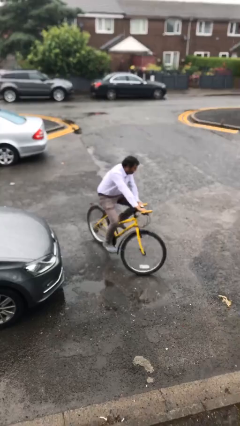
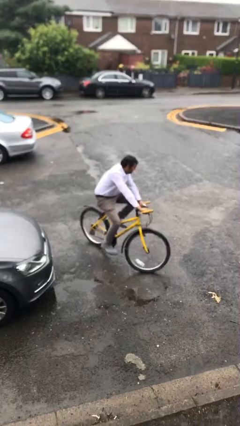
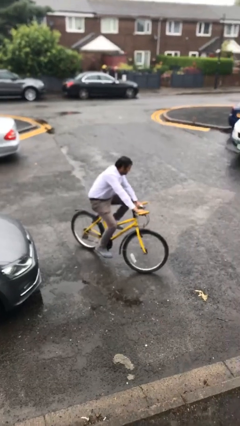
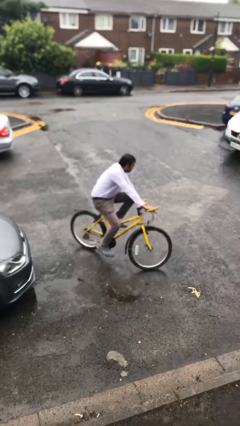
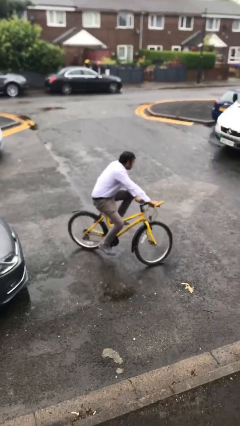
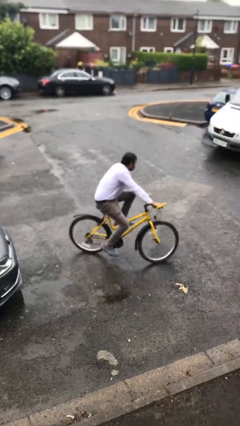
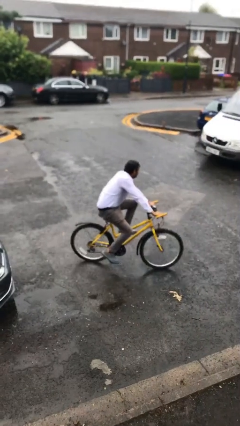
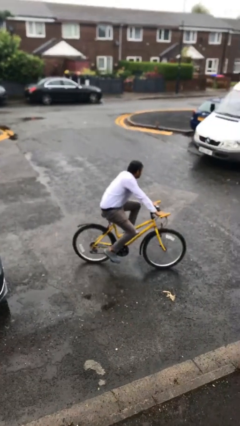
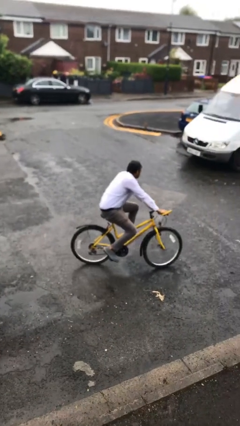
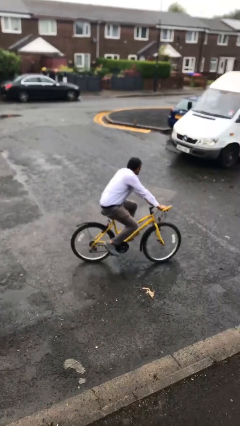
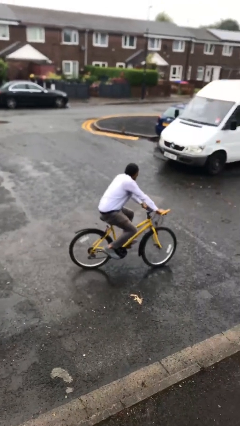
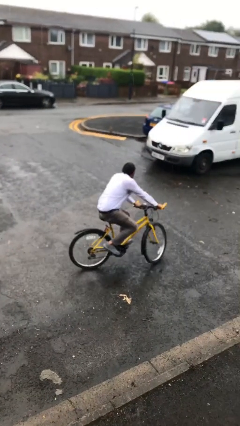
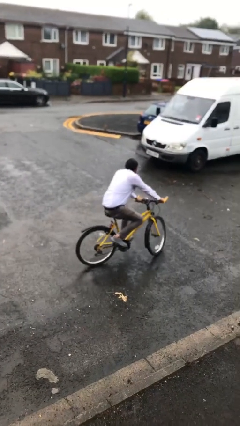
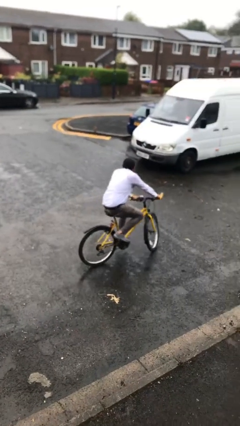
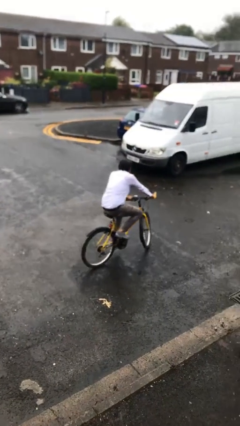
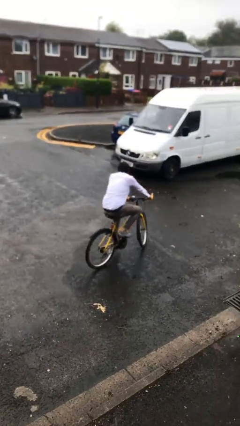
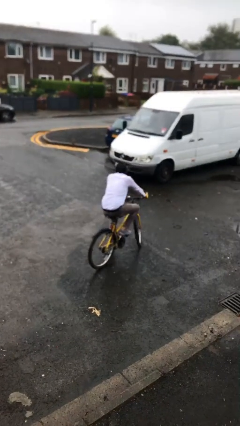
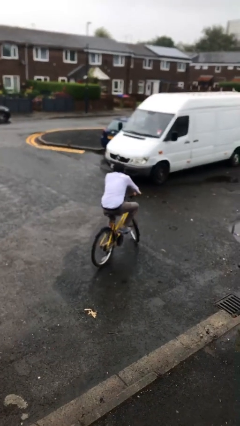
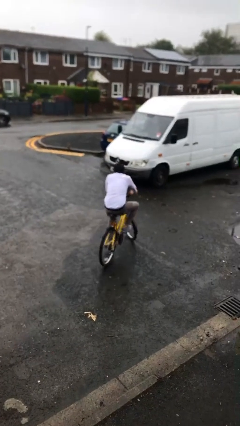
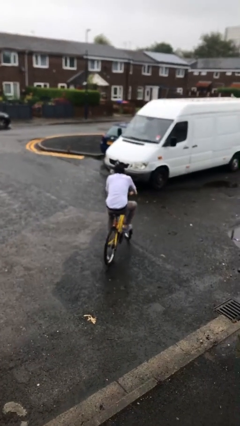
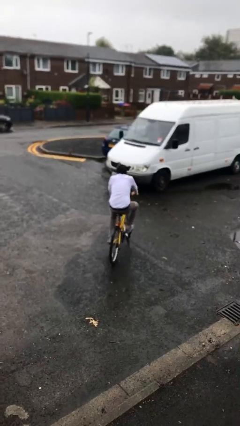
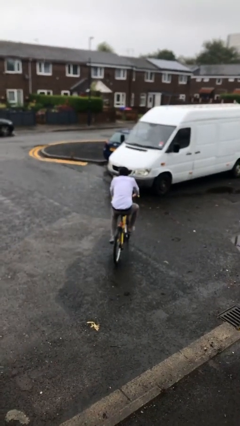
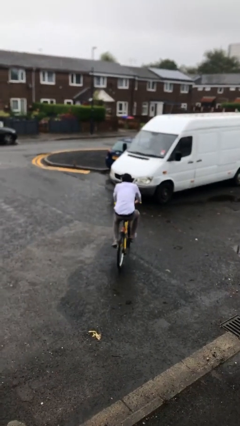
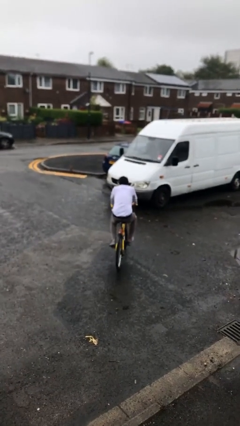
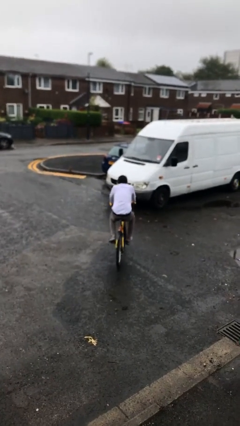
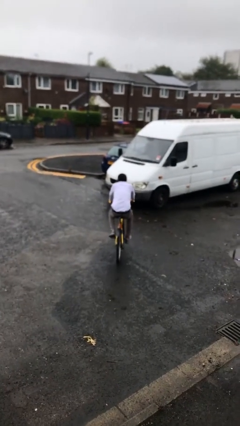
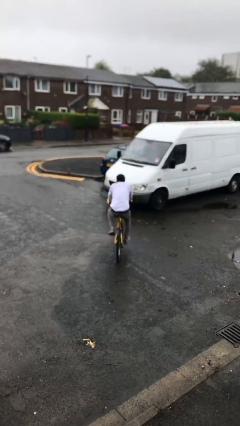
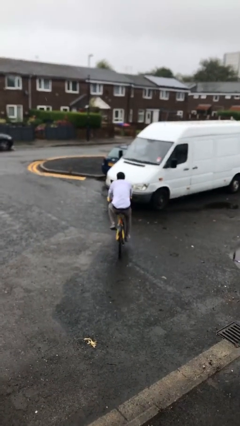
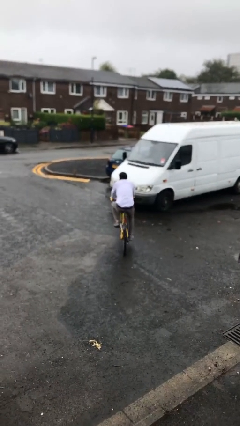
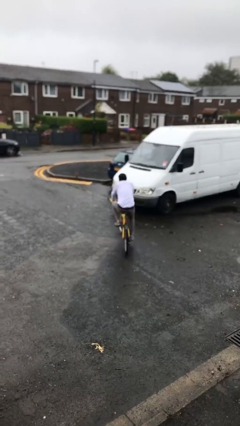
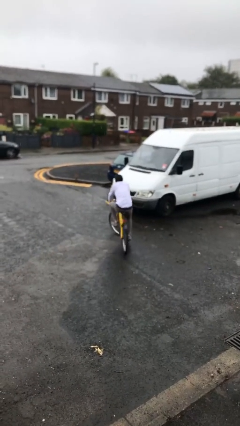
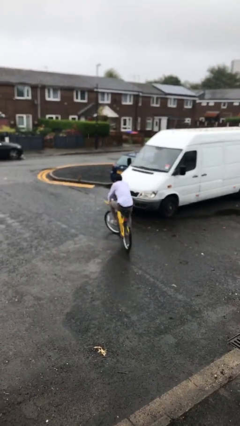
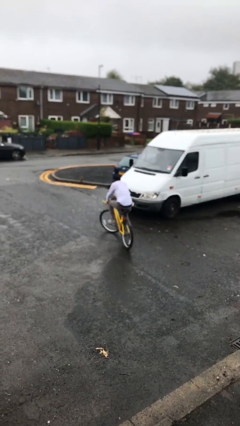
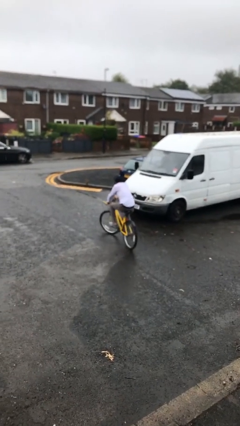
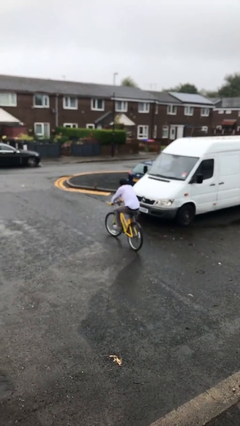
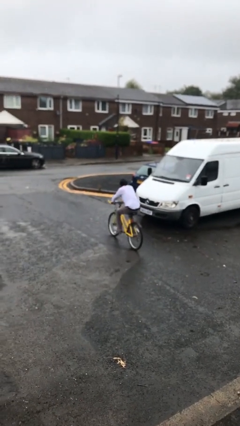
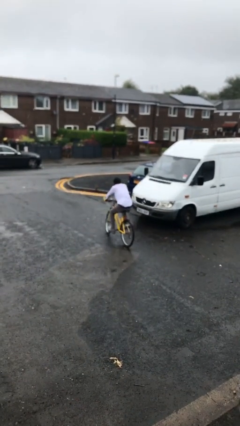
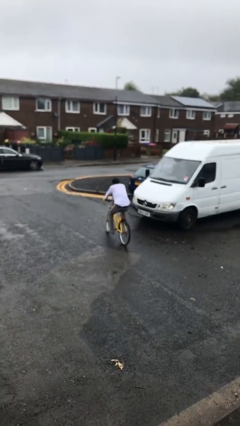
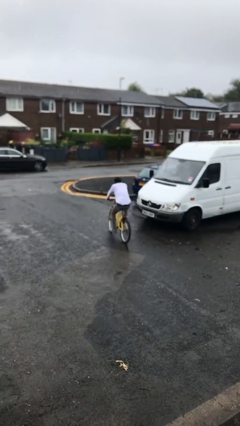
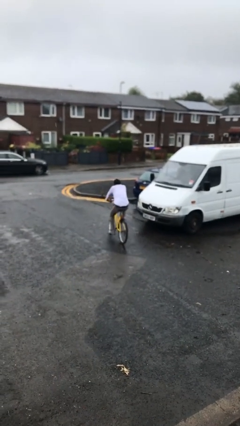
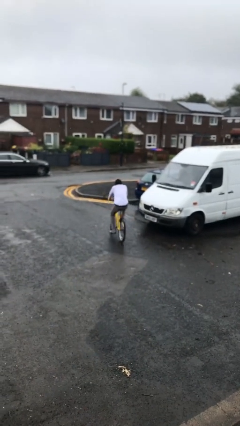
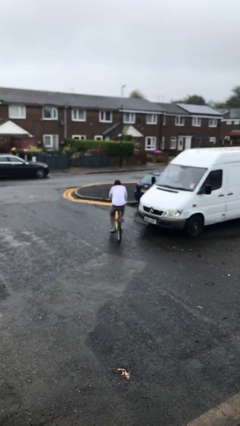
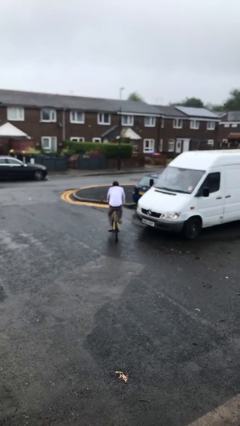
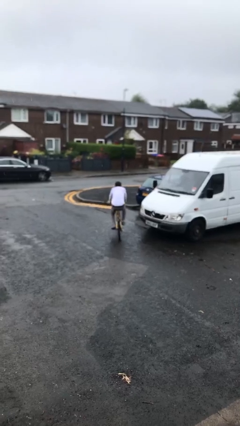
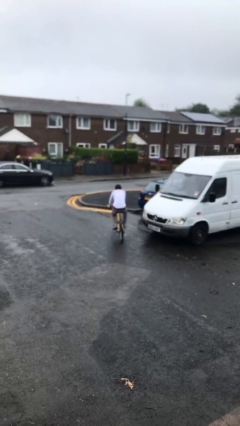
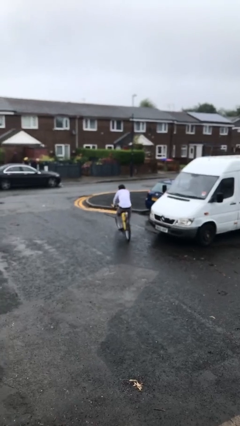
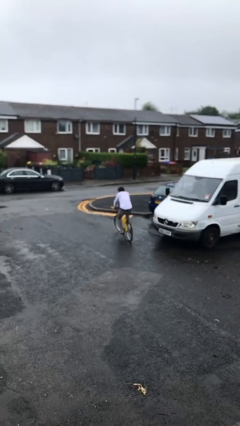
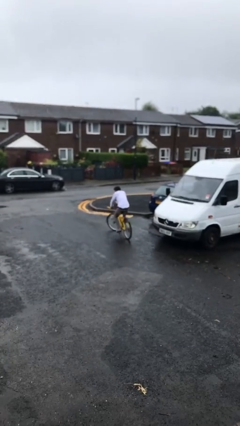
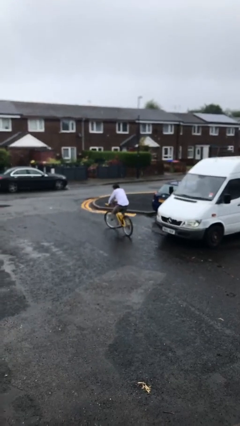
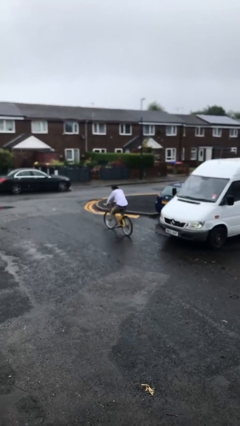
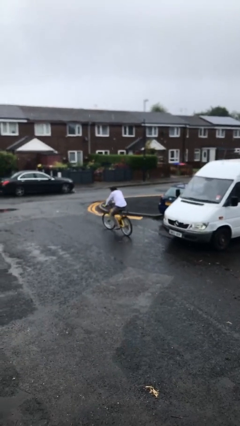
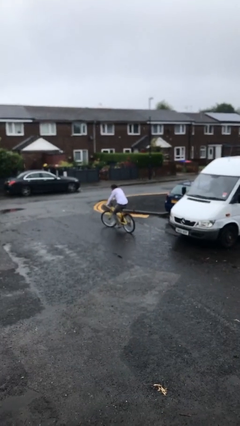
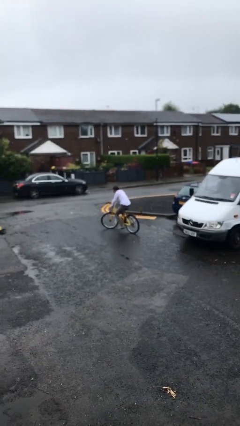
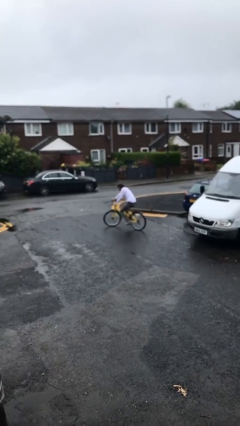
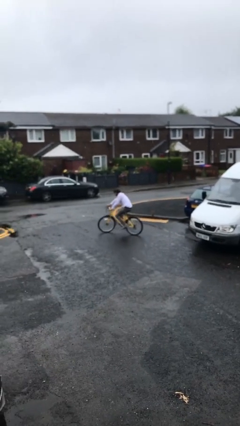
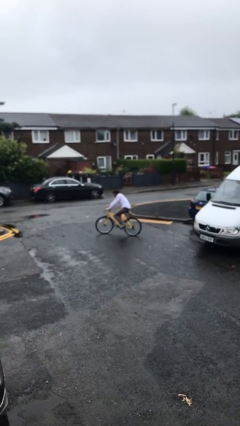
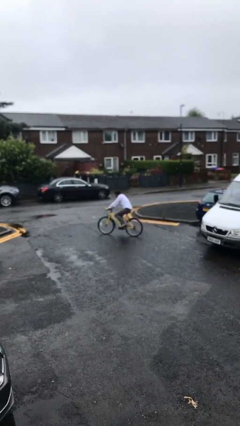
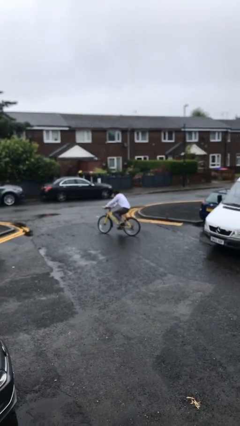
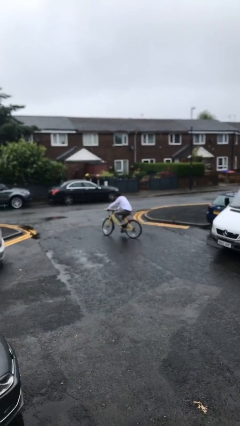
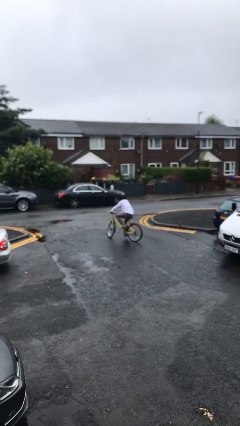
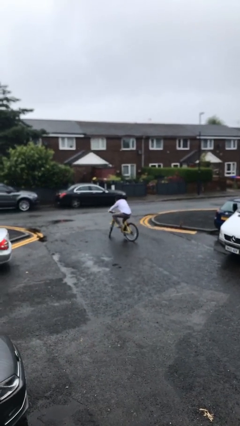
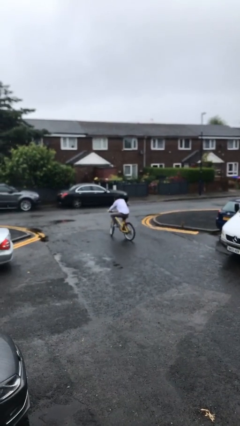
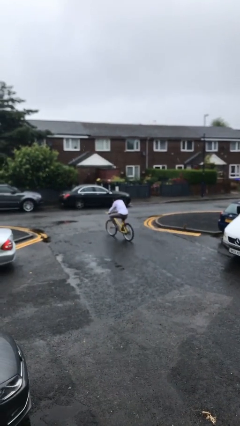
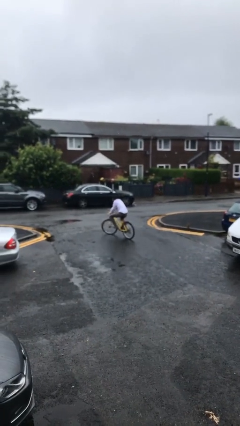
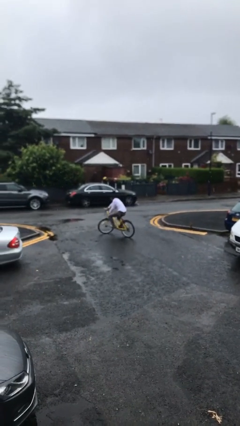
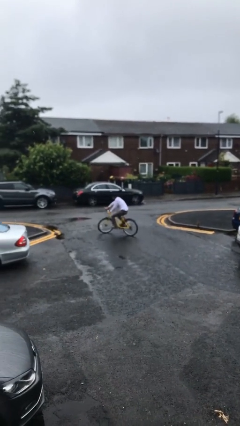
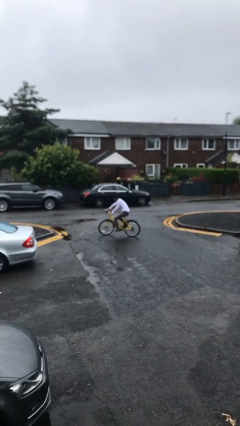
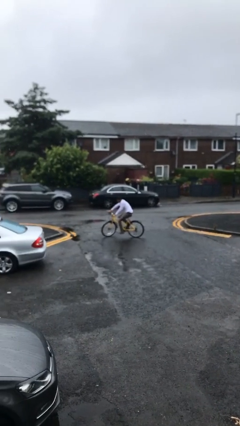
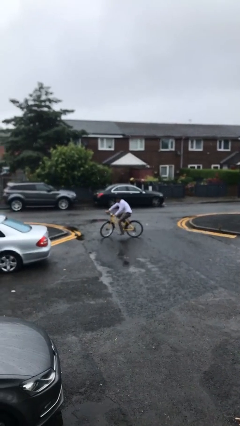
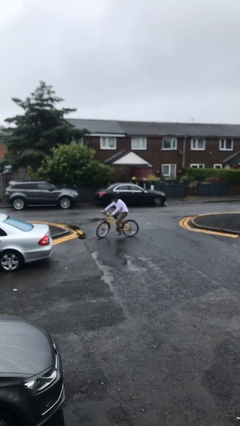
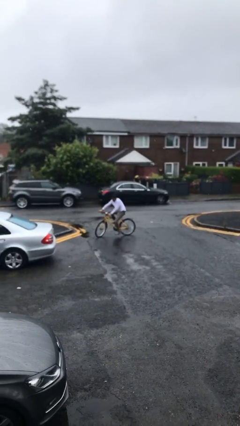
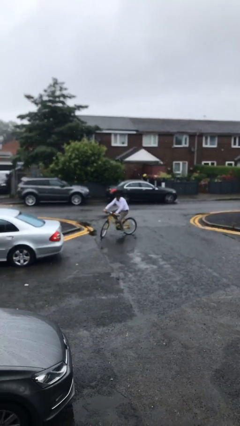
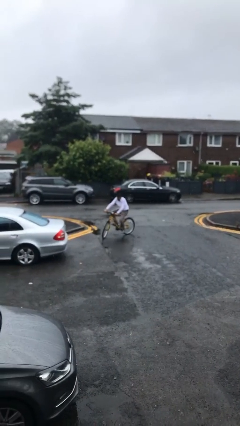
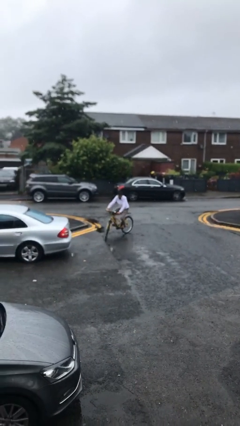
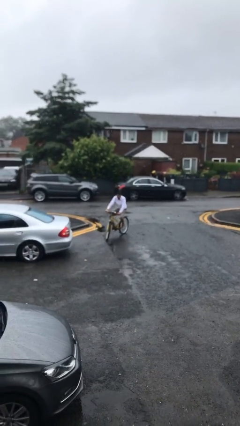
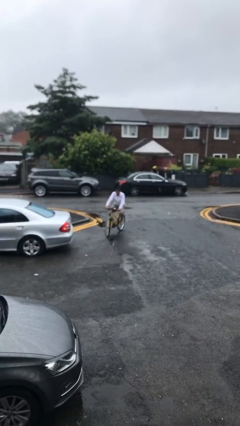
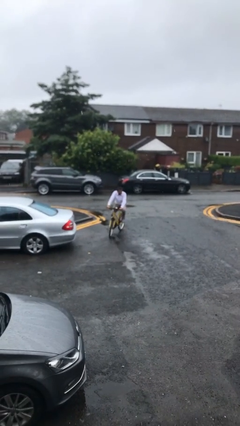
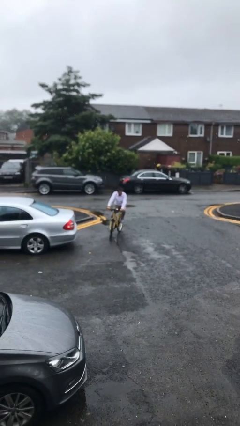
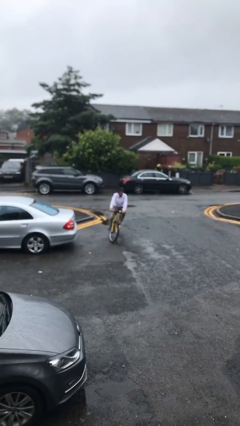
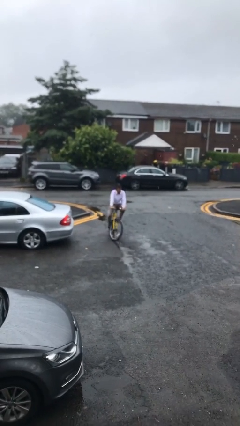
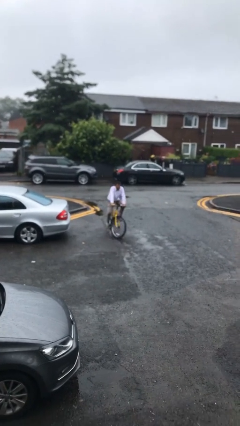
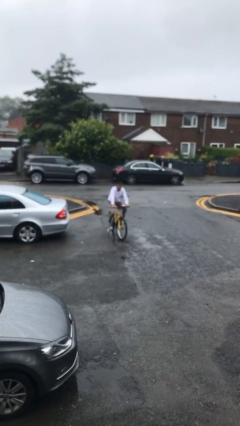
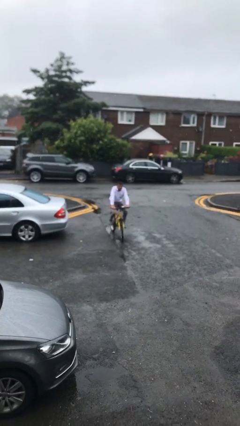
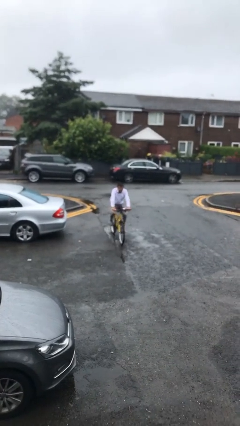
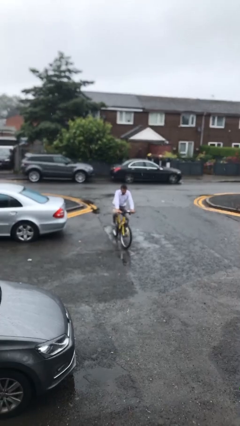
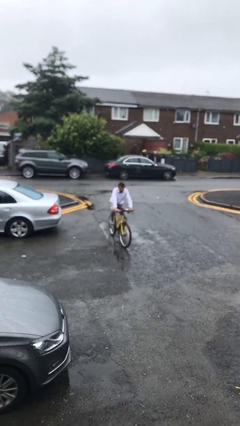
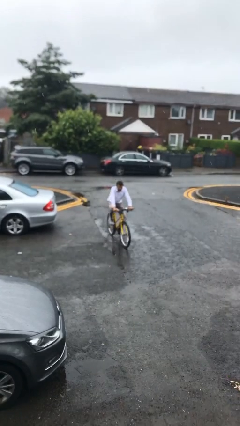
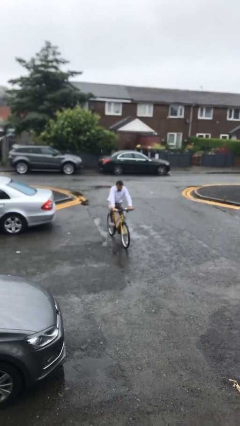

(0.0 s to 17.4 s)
person rides bicycle

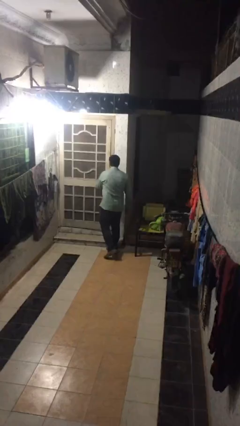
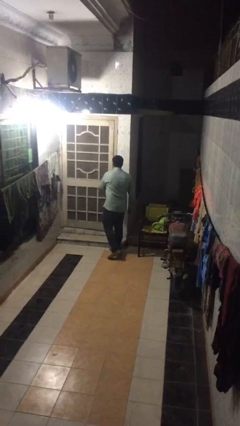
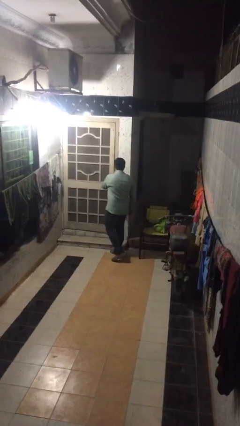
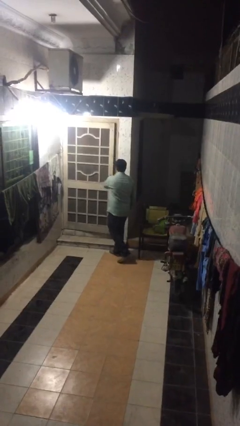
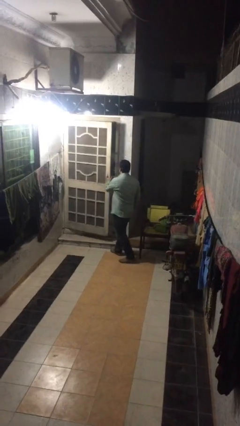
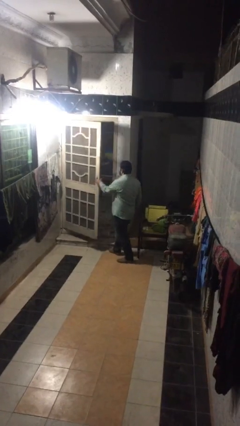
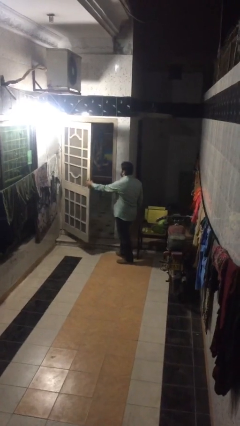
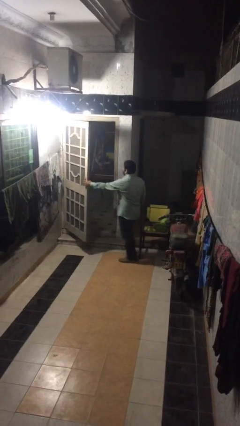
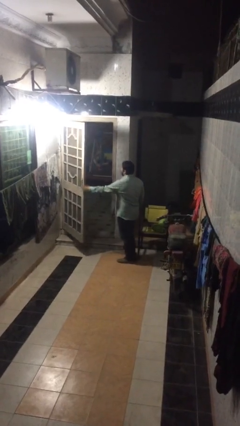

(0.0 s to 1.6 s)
person opens facility door
